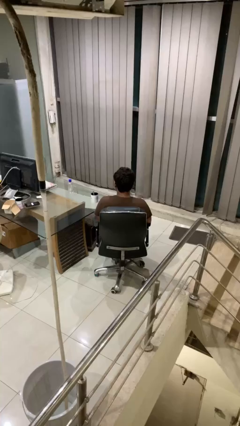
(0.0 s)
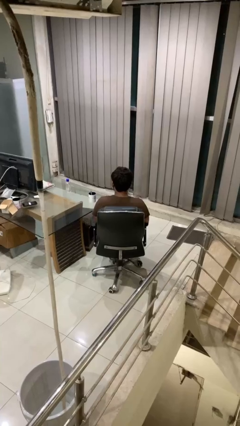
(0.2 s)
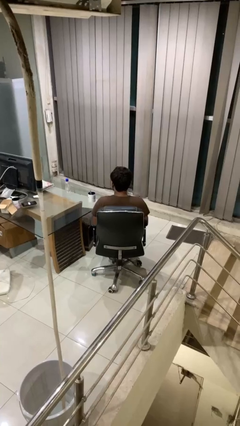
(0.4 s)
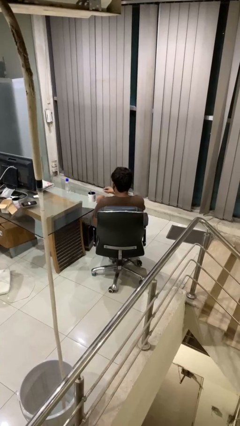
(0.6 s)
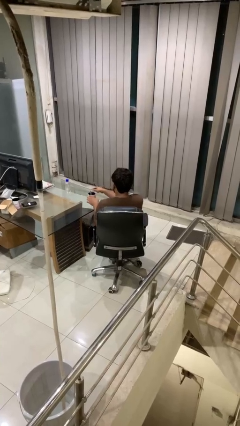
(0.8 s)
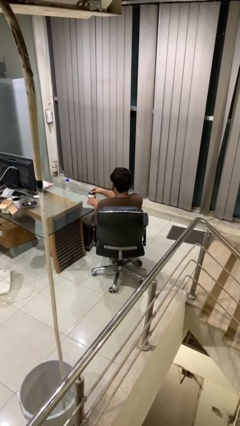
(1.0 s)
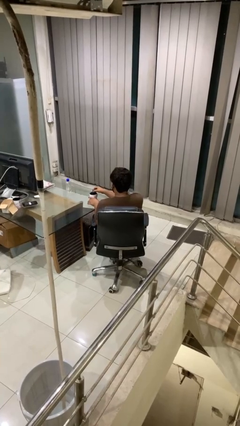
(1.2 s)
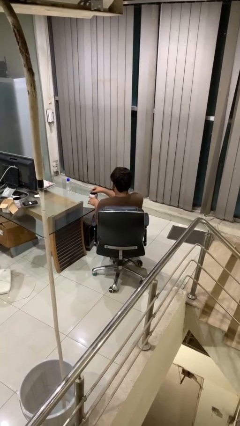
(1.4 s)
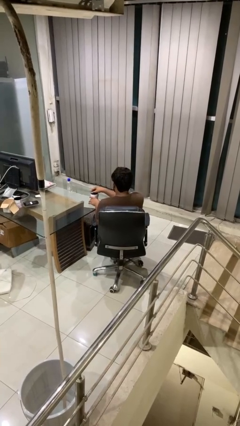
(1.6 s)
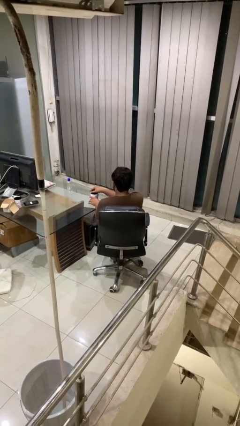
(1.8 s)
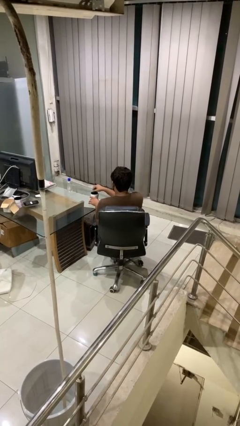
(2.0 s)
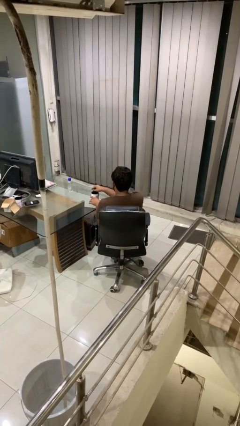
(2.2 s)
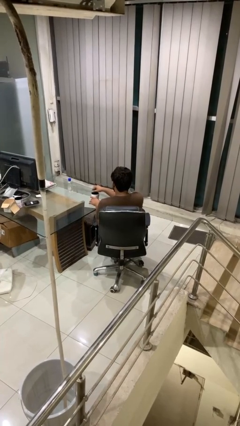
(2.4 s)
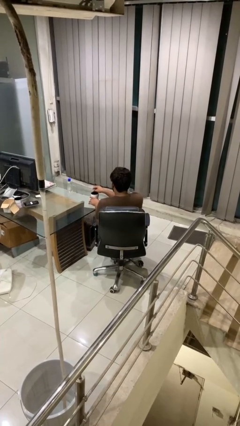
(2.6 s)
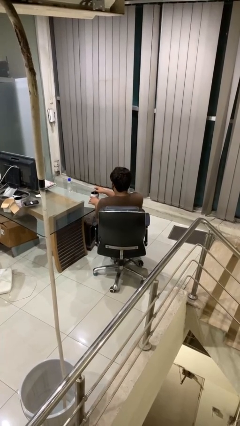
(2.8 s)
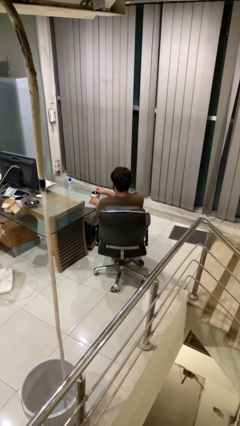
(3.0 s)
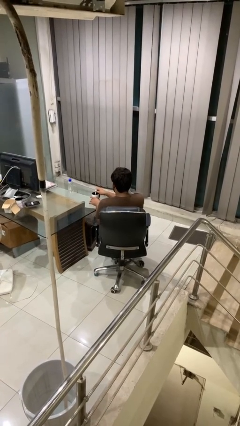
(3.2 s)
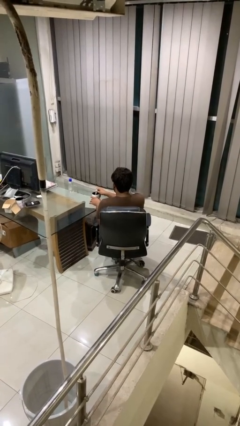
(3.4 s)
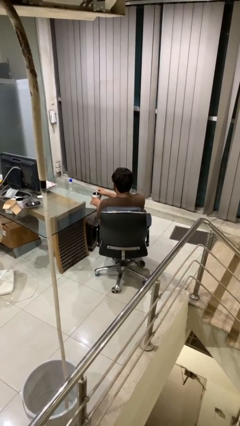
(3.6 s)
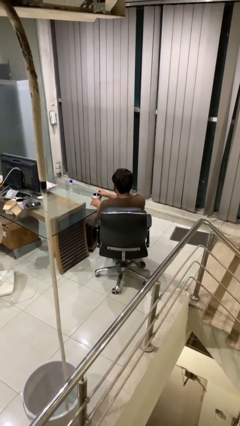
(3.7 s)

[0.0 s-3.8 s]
person stirs mug

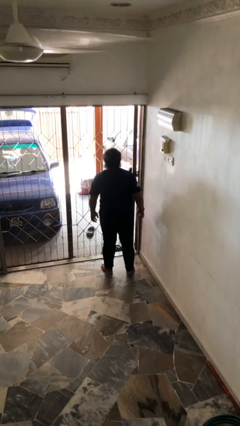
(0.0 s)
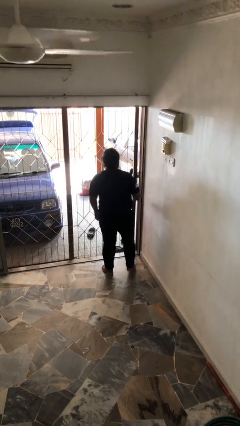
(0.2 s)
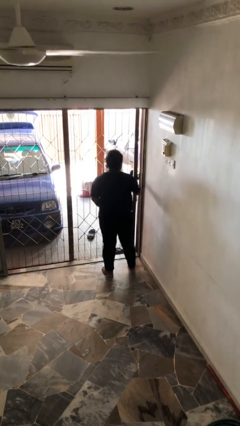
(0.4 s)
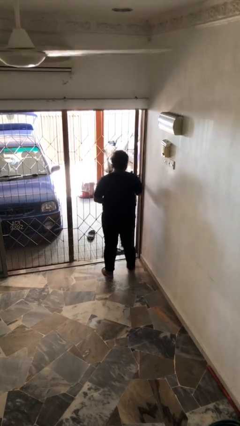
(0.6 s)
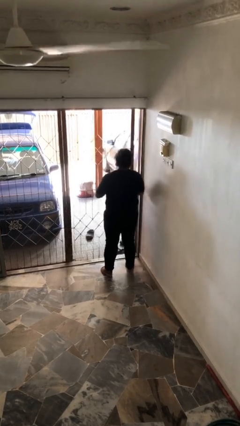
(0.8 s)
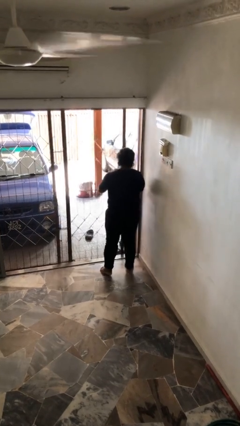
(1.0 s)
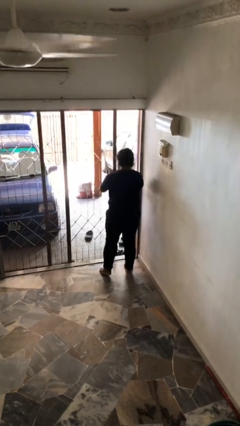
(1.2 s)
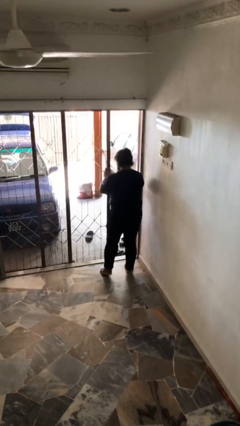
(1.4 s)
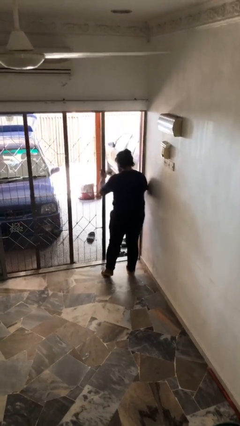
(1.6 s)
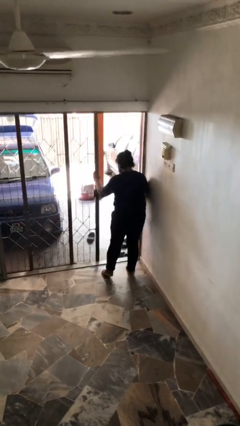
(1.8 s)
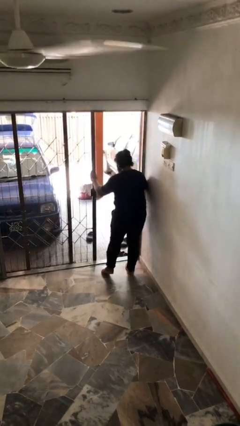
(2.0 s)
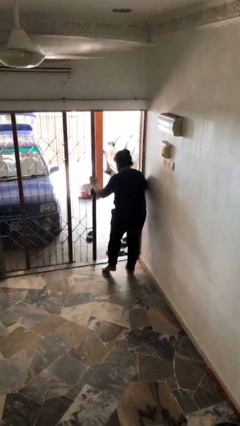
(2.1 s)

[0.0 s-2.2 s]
person opens facility door

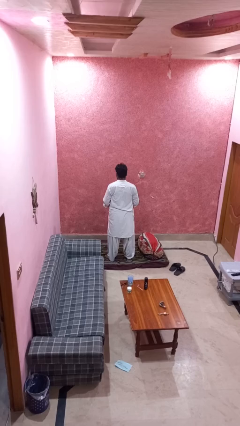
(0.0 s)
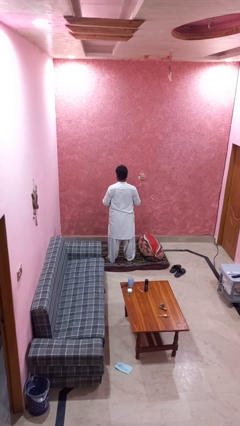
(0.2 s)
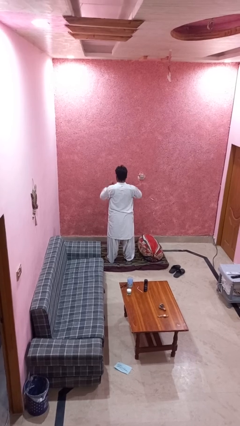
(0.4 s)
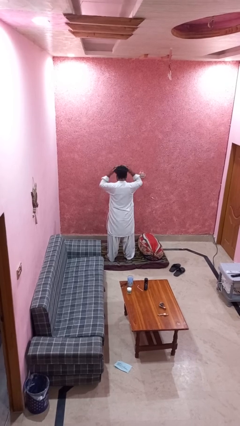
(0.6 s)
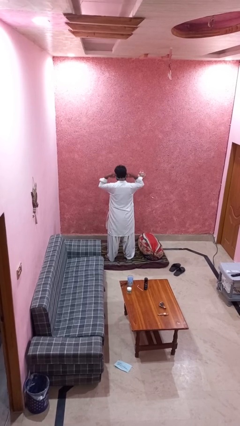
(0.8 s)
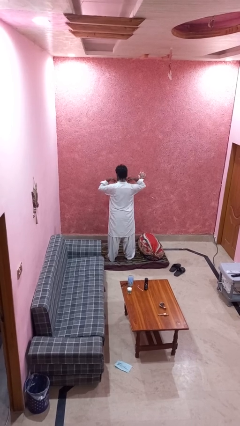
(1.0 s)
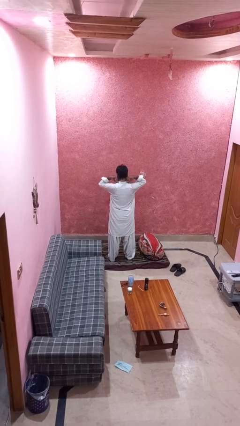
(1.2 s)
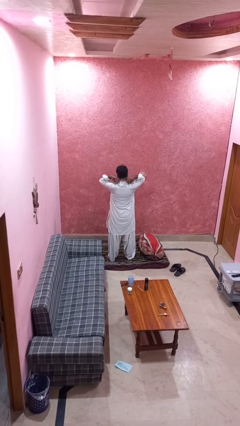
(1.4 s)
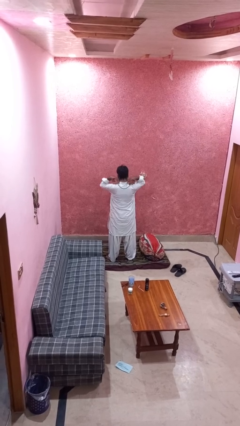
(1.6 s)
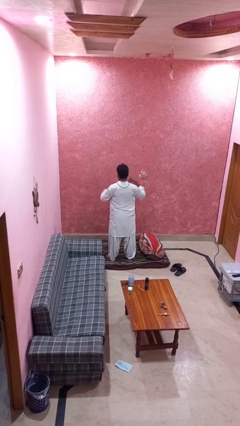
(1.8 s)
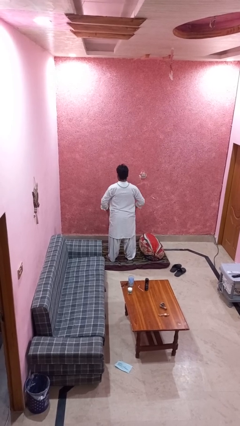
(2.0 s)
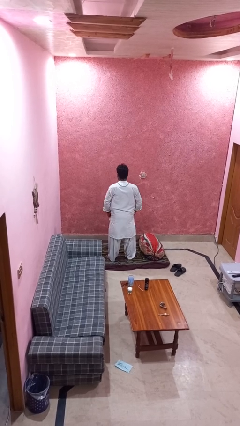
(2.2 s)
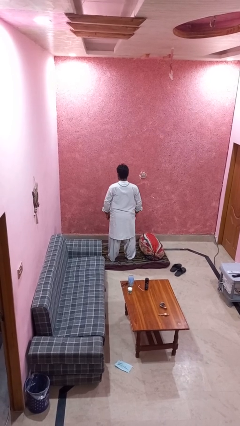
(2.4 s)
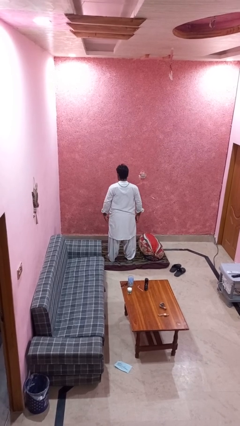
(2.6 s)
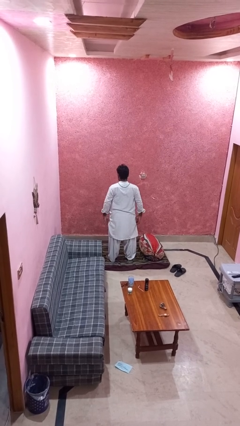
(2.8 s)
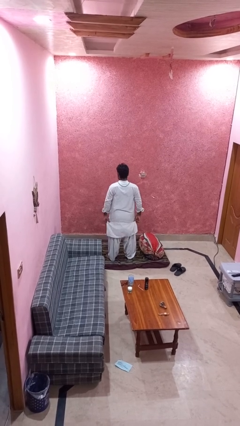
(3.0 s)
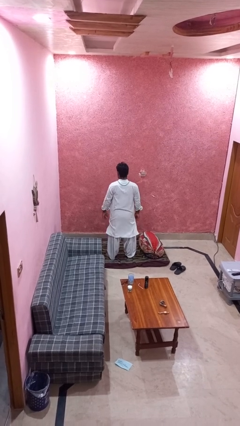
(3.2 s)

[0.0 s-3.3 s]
person puts on necklace

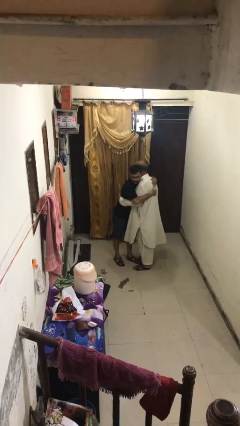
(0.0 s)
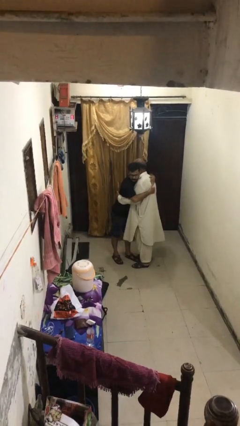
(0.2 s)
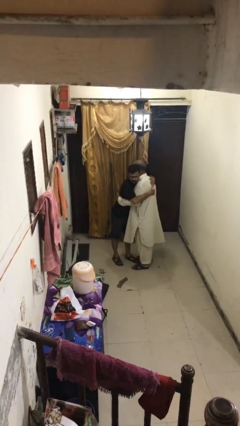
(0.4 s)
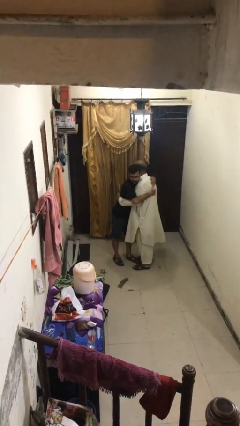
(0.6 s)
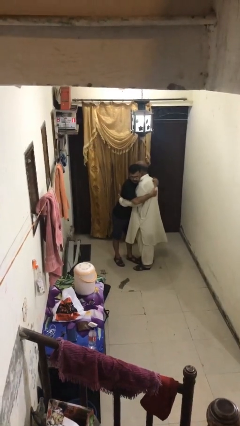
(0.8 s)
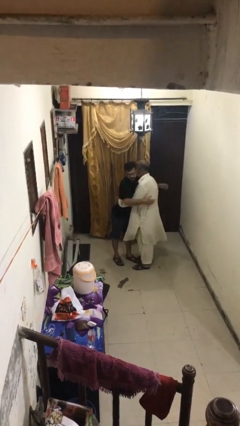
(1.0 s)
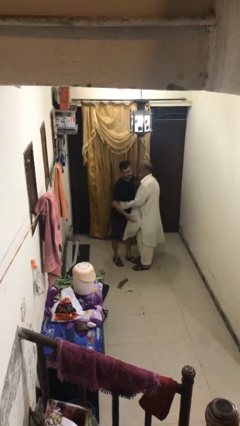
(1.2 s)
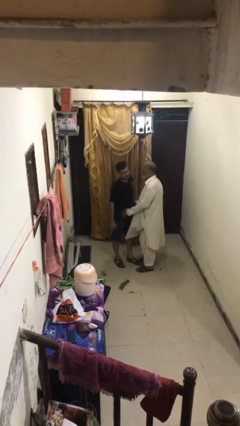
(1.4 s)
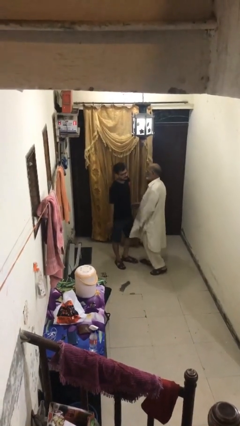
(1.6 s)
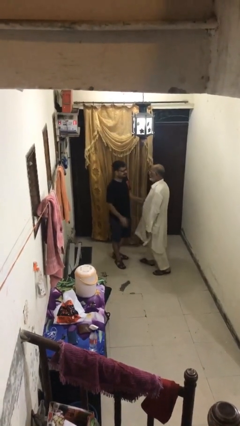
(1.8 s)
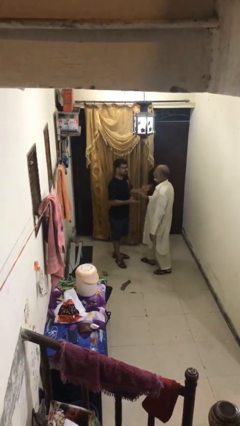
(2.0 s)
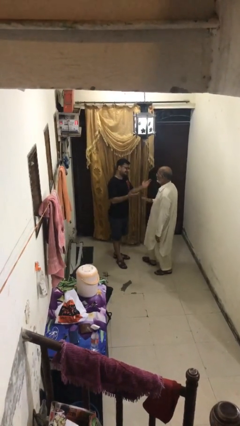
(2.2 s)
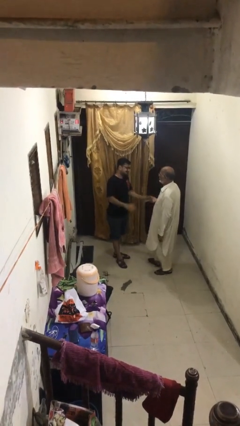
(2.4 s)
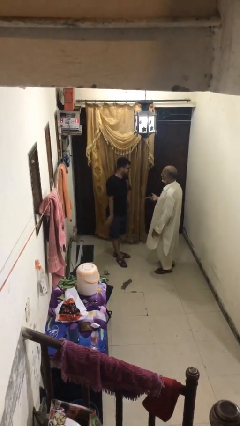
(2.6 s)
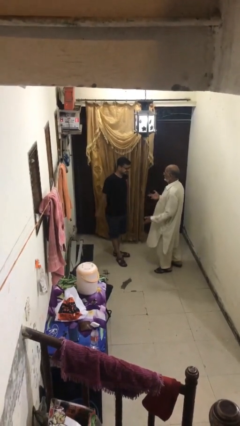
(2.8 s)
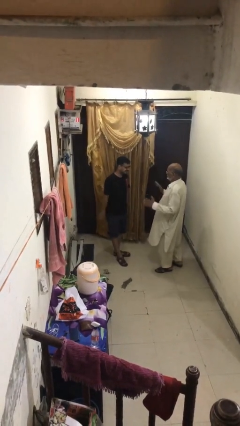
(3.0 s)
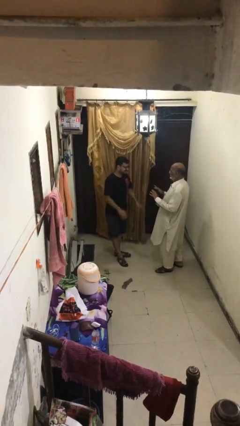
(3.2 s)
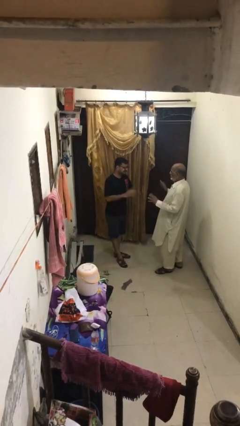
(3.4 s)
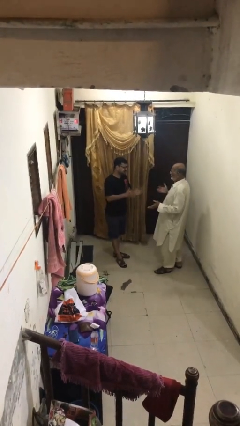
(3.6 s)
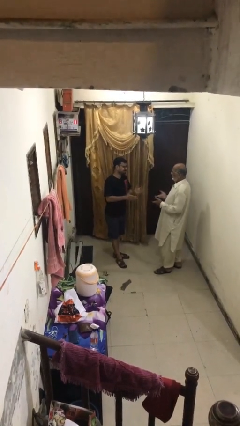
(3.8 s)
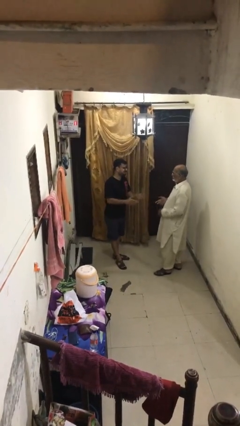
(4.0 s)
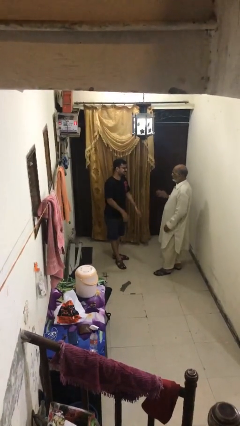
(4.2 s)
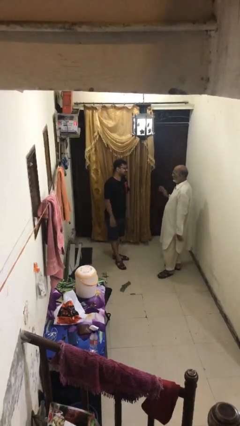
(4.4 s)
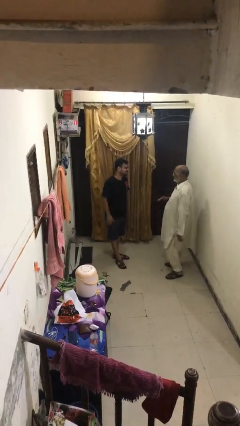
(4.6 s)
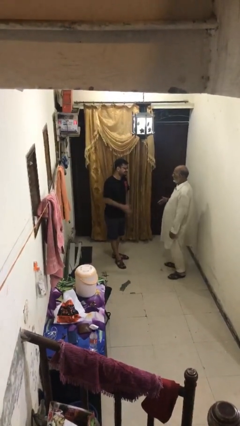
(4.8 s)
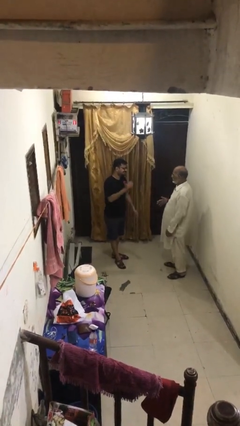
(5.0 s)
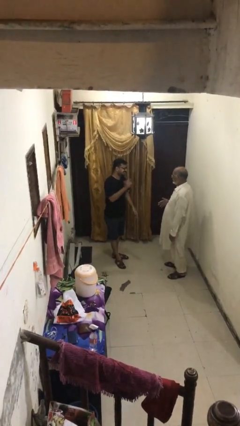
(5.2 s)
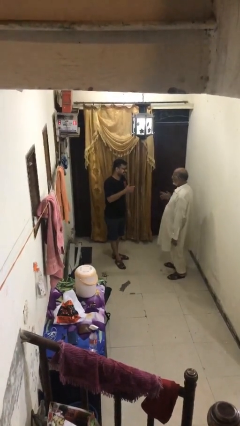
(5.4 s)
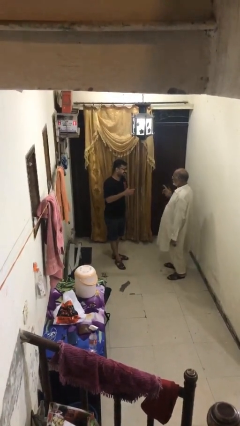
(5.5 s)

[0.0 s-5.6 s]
person talks to person

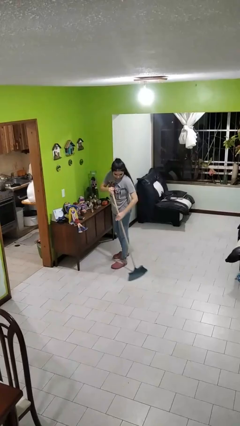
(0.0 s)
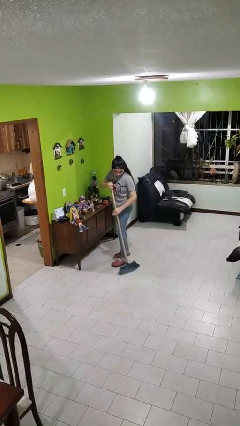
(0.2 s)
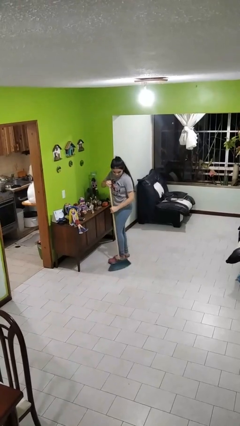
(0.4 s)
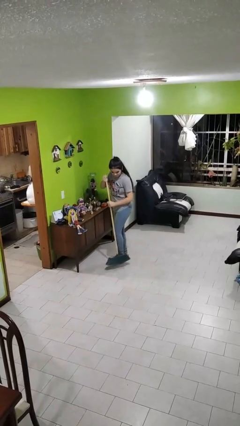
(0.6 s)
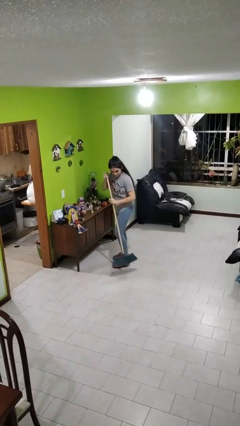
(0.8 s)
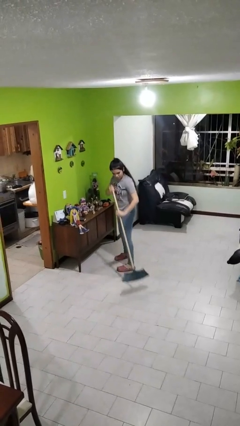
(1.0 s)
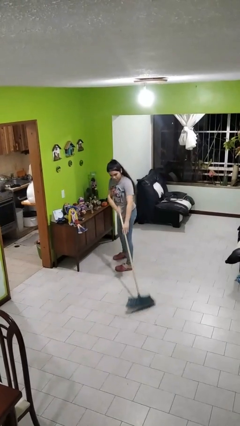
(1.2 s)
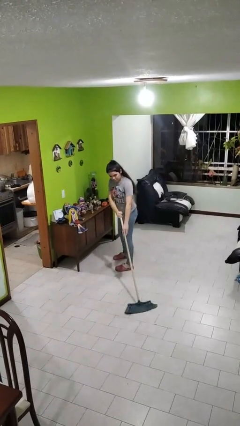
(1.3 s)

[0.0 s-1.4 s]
person sweeps floor

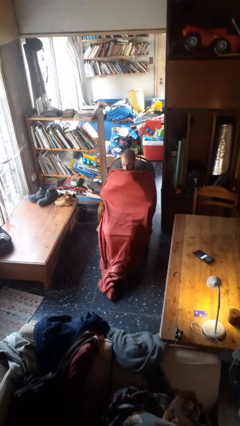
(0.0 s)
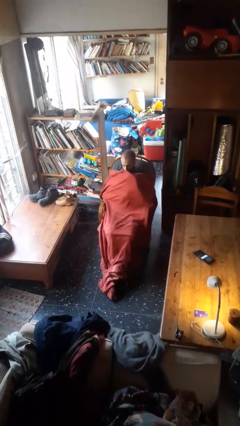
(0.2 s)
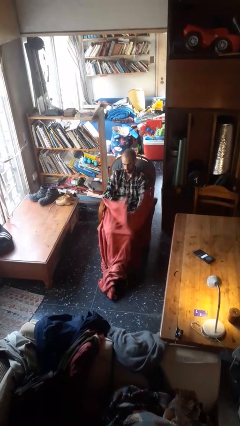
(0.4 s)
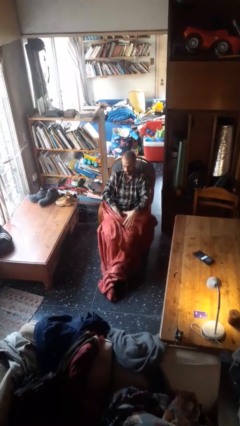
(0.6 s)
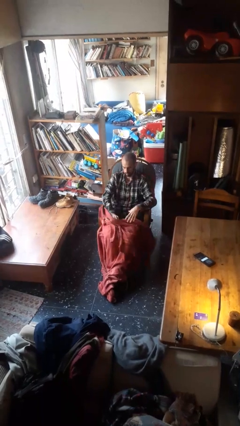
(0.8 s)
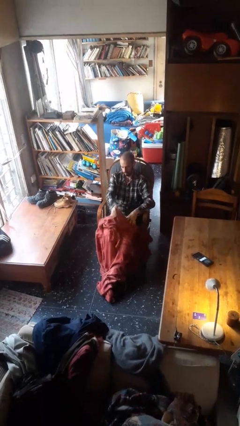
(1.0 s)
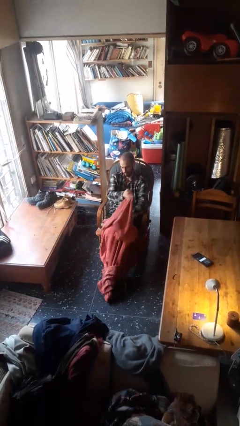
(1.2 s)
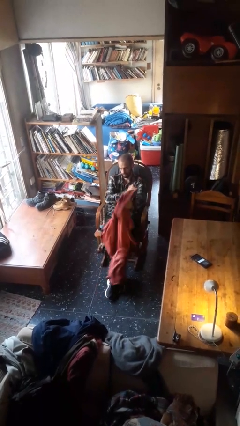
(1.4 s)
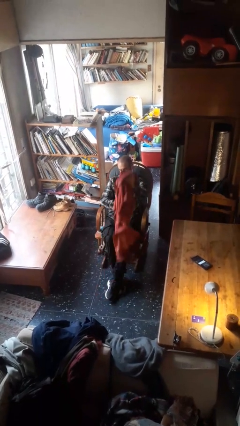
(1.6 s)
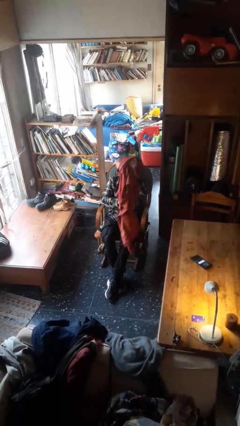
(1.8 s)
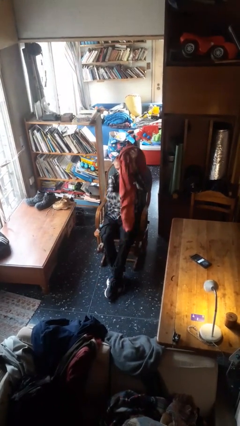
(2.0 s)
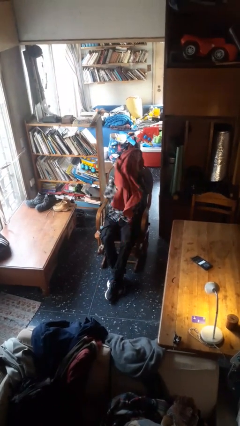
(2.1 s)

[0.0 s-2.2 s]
person uncovers with blanket
